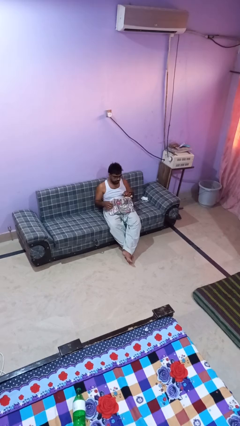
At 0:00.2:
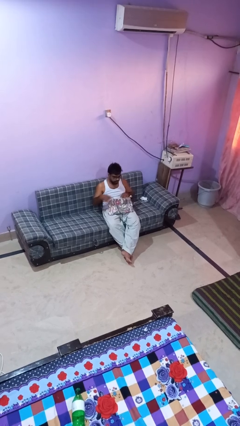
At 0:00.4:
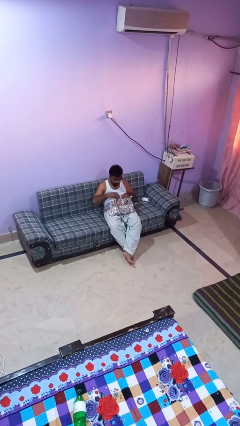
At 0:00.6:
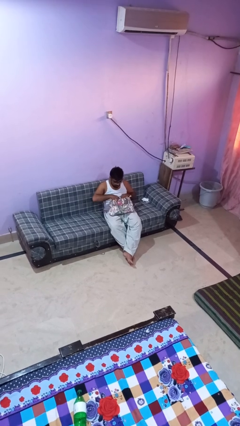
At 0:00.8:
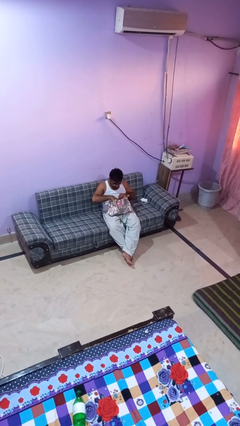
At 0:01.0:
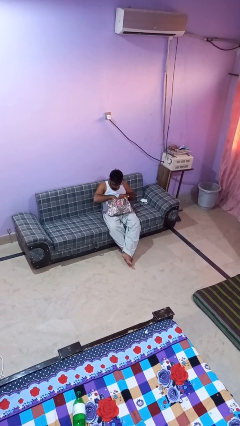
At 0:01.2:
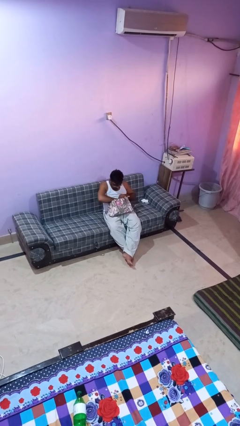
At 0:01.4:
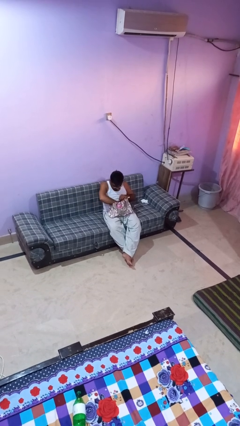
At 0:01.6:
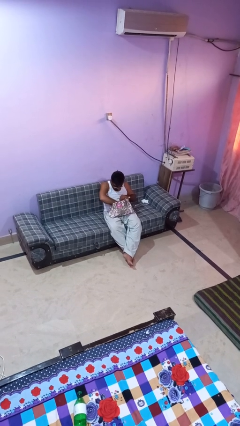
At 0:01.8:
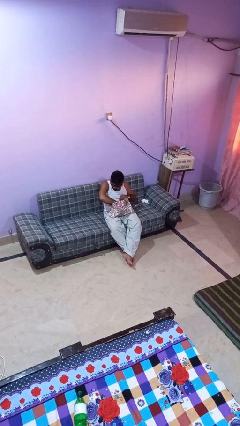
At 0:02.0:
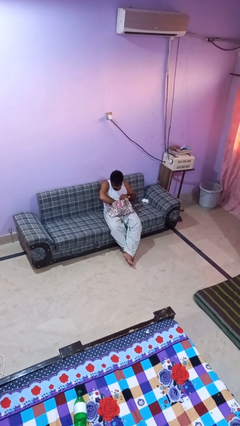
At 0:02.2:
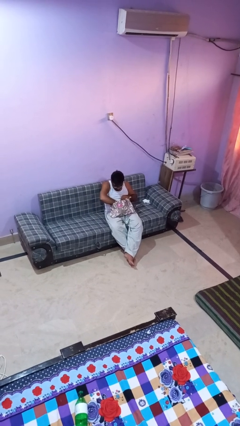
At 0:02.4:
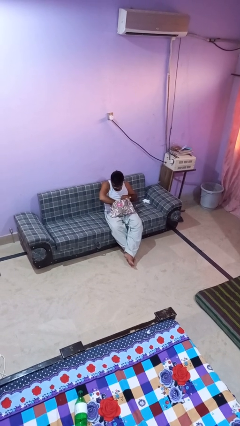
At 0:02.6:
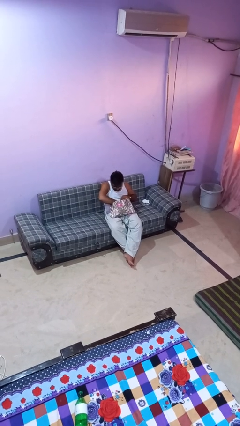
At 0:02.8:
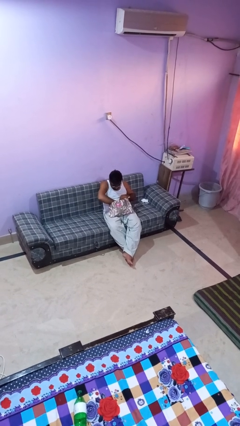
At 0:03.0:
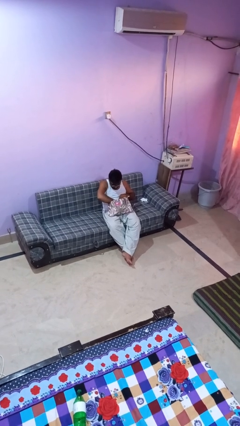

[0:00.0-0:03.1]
person searches in purse

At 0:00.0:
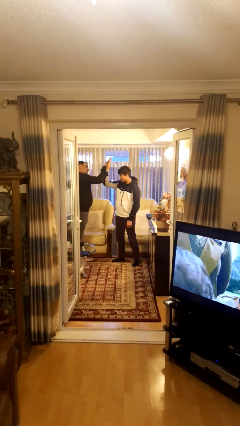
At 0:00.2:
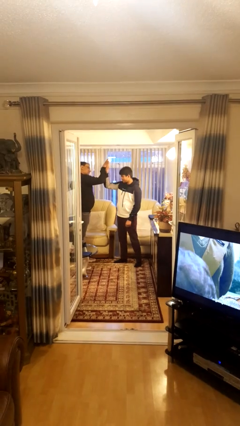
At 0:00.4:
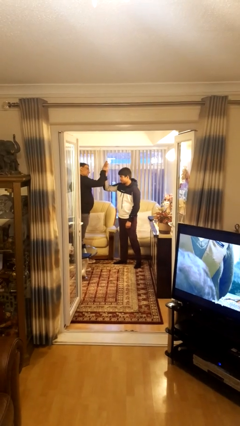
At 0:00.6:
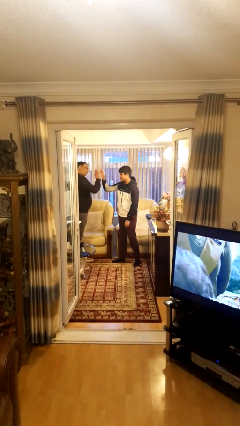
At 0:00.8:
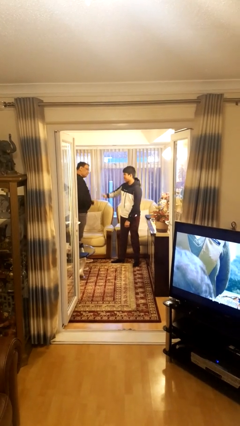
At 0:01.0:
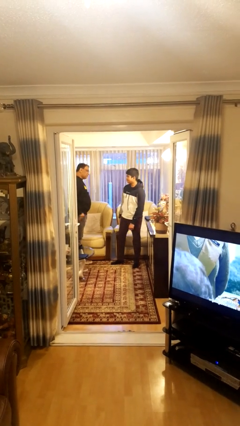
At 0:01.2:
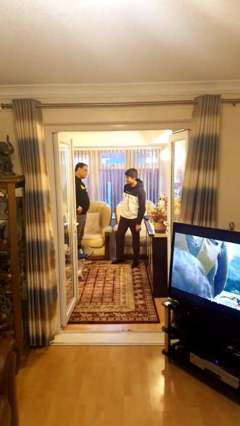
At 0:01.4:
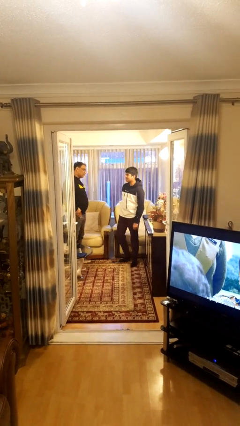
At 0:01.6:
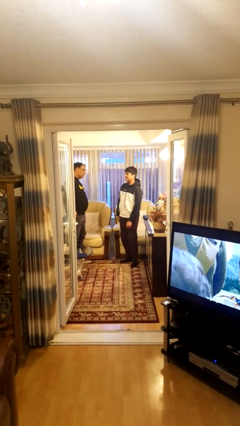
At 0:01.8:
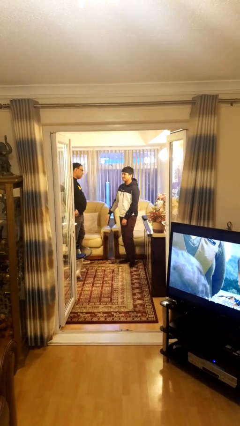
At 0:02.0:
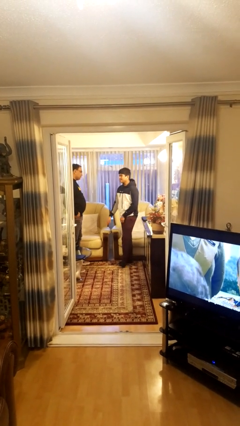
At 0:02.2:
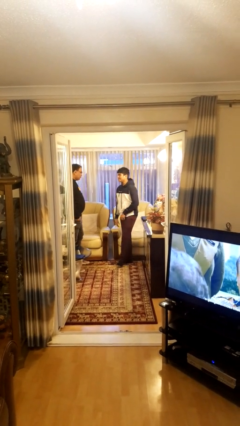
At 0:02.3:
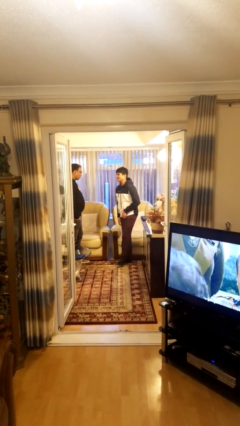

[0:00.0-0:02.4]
person highfives hand

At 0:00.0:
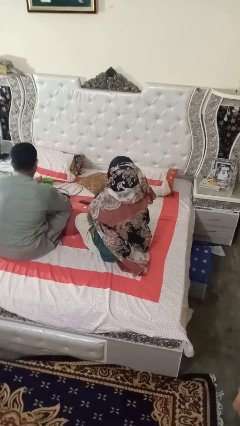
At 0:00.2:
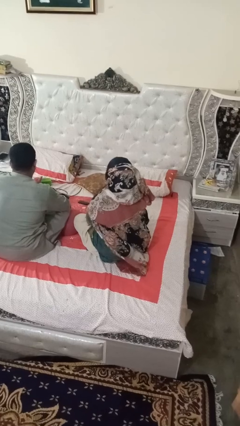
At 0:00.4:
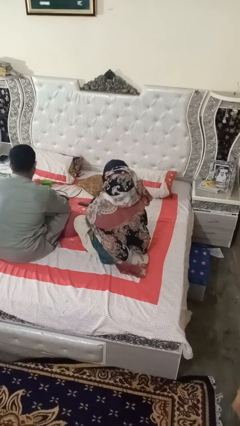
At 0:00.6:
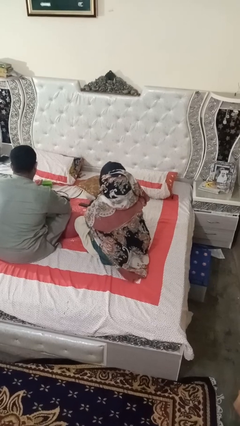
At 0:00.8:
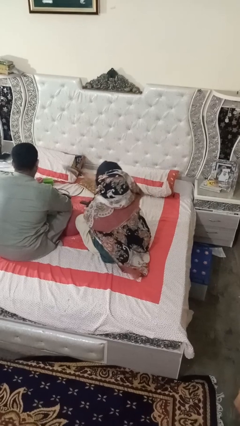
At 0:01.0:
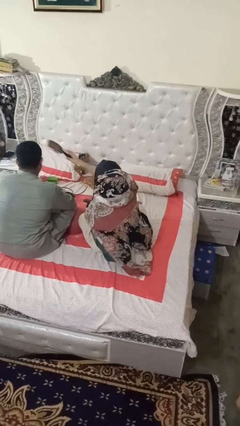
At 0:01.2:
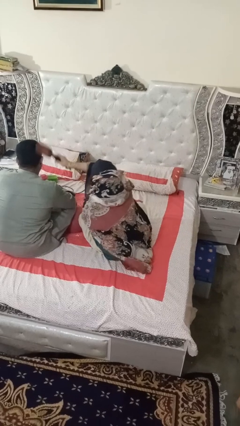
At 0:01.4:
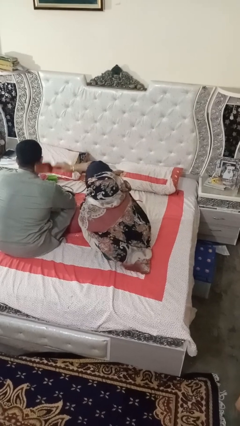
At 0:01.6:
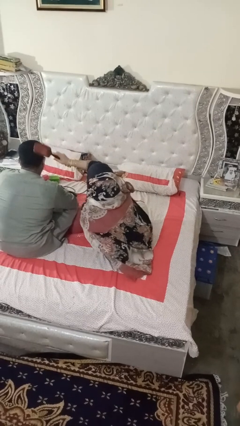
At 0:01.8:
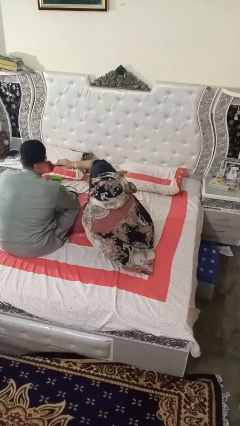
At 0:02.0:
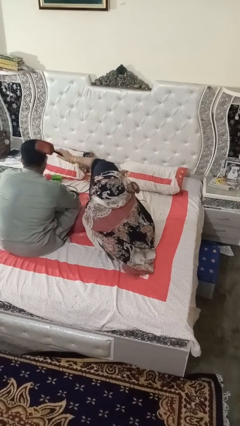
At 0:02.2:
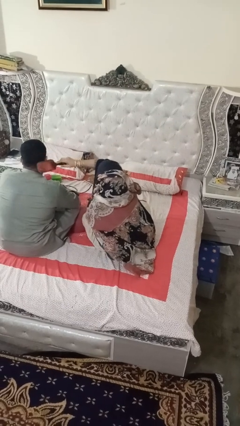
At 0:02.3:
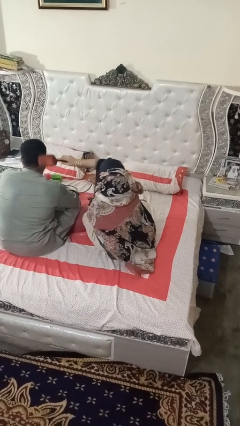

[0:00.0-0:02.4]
person brushes hair of person

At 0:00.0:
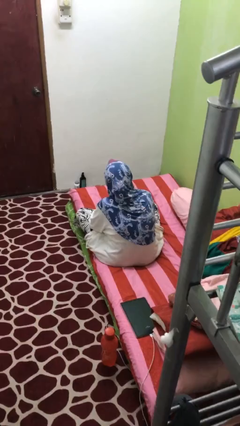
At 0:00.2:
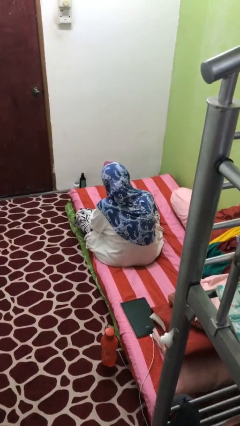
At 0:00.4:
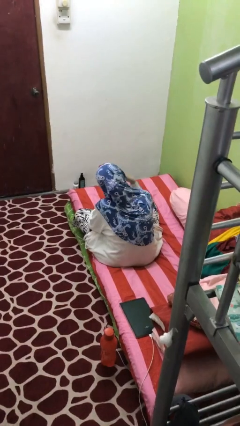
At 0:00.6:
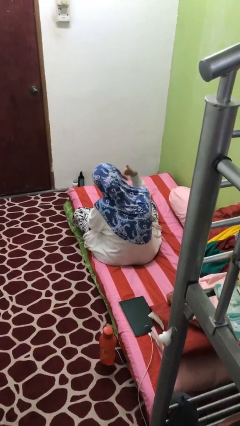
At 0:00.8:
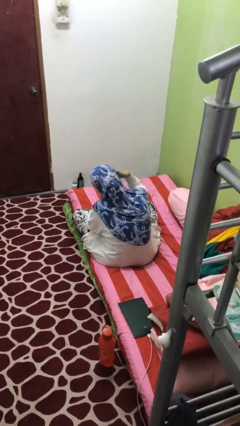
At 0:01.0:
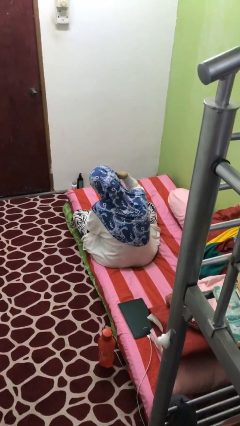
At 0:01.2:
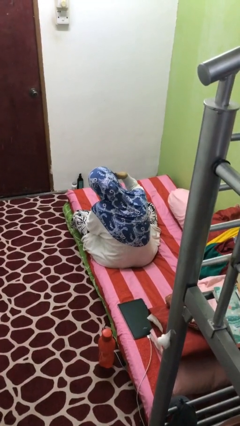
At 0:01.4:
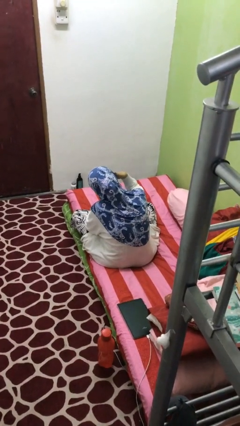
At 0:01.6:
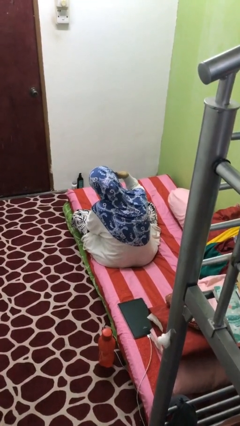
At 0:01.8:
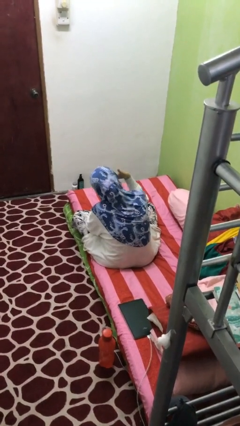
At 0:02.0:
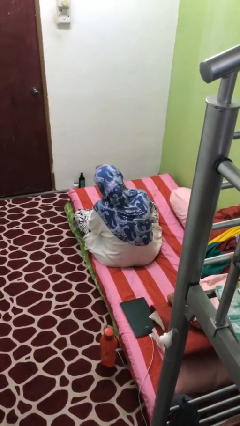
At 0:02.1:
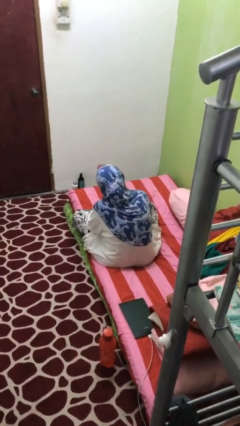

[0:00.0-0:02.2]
person gestures call me

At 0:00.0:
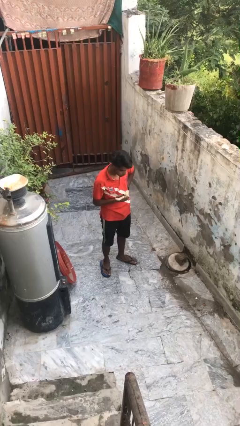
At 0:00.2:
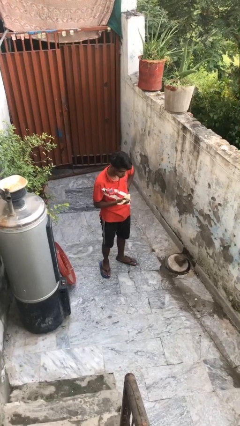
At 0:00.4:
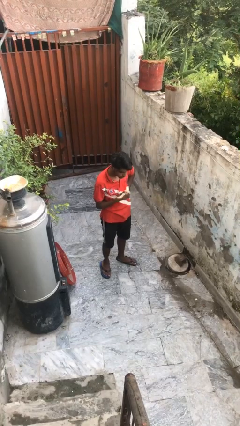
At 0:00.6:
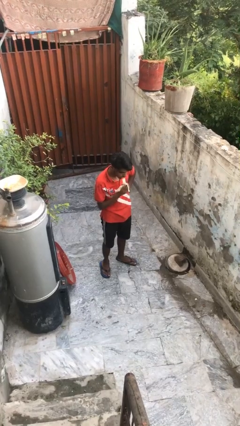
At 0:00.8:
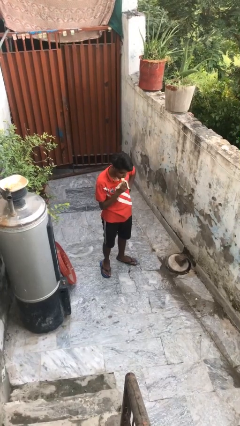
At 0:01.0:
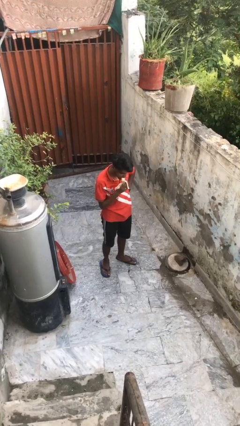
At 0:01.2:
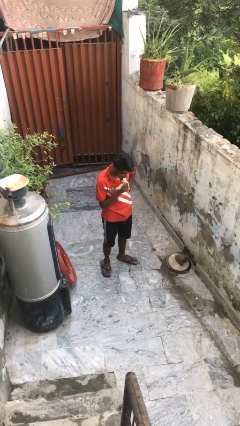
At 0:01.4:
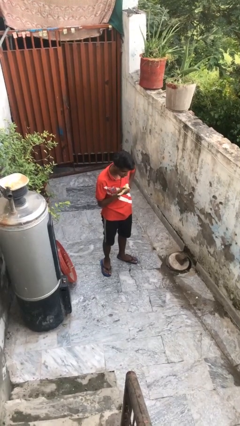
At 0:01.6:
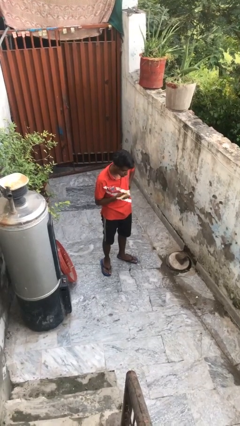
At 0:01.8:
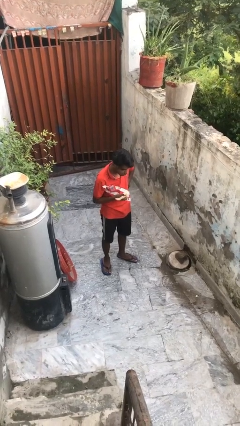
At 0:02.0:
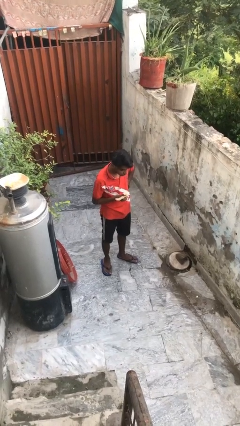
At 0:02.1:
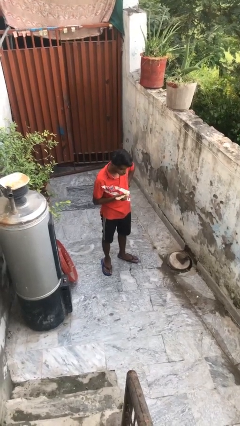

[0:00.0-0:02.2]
person eats banana

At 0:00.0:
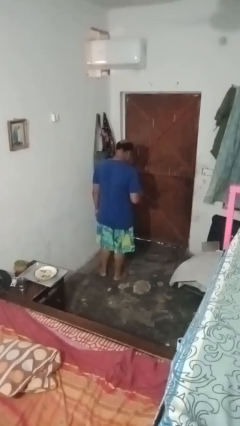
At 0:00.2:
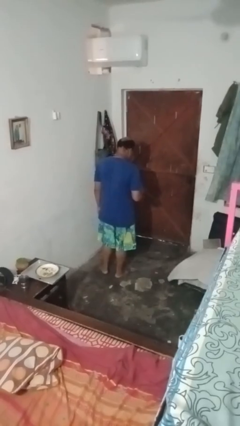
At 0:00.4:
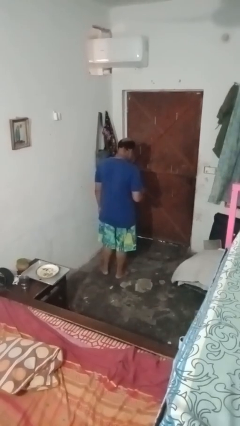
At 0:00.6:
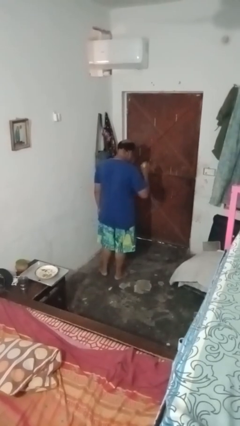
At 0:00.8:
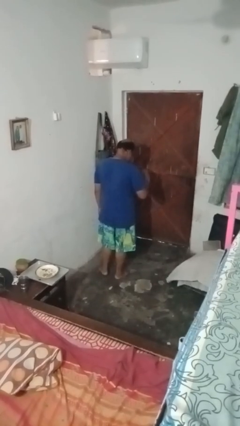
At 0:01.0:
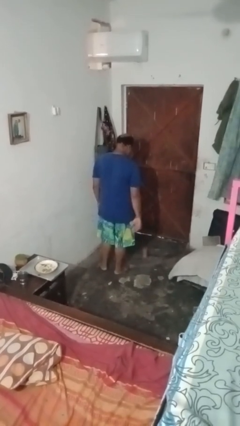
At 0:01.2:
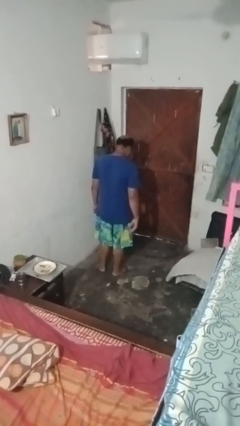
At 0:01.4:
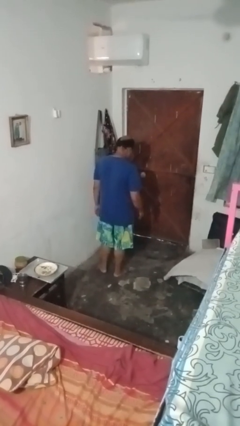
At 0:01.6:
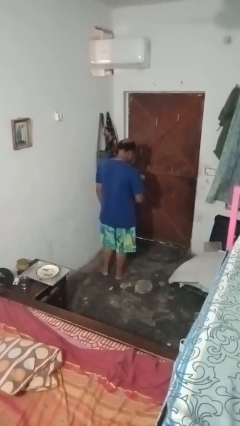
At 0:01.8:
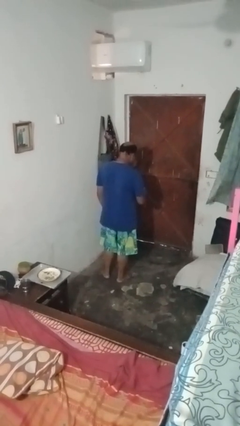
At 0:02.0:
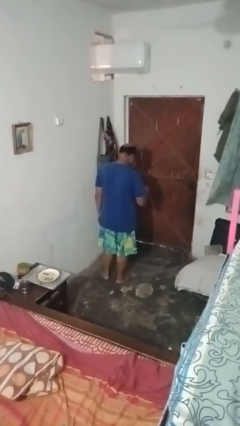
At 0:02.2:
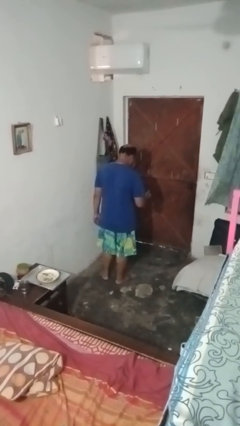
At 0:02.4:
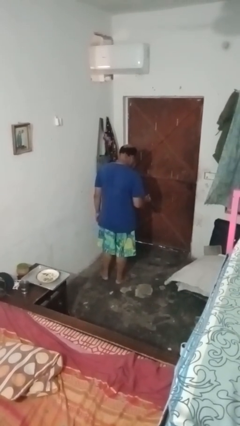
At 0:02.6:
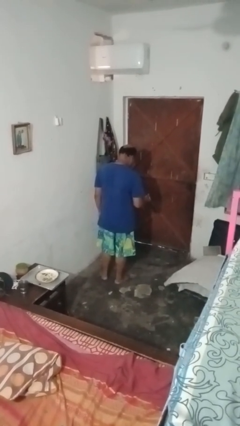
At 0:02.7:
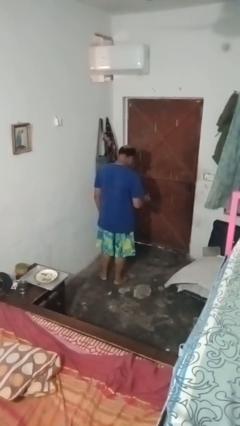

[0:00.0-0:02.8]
person bounces ball on floor

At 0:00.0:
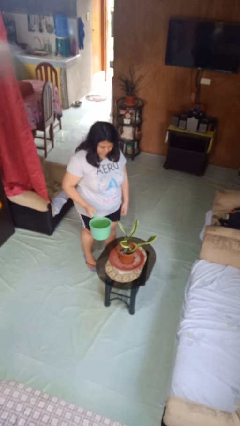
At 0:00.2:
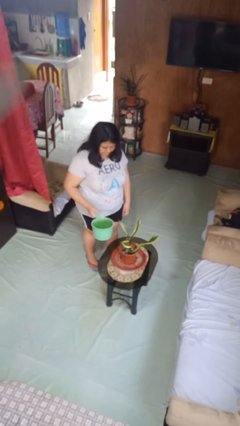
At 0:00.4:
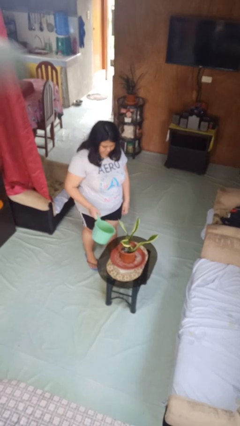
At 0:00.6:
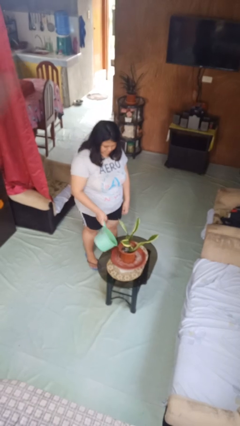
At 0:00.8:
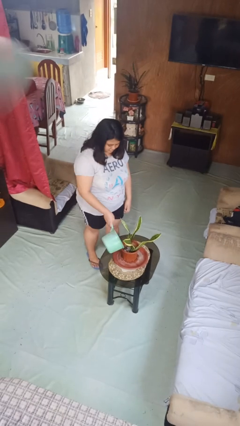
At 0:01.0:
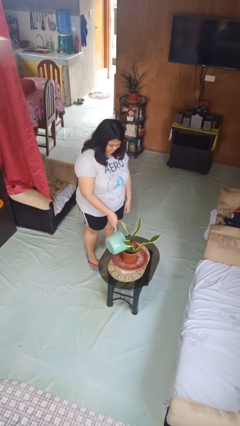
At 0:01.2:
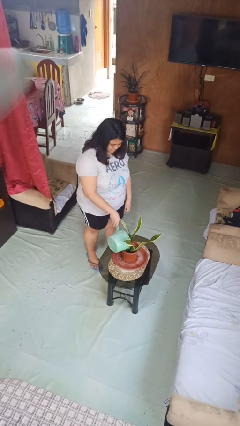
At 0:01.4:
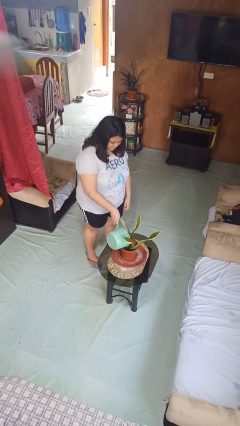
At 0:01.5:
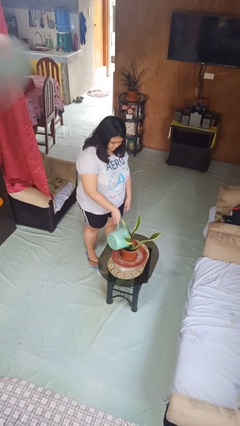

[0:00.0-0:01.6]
person waters houseplant

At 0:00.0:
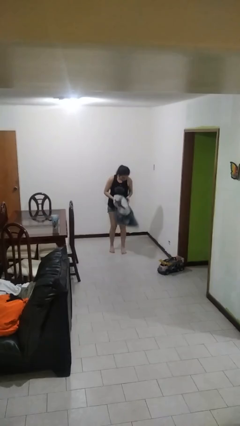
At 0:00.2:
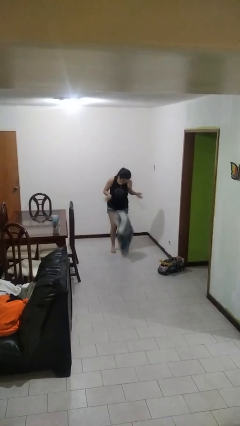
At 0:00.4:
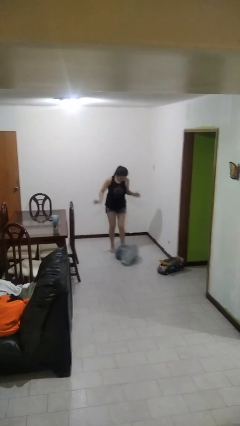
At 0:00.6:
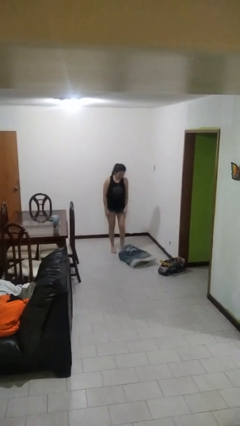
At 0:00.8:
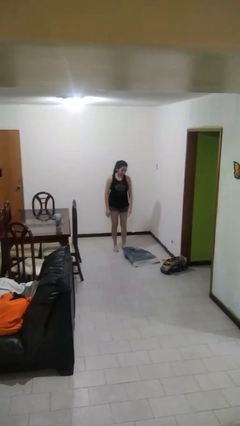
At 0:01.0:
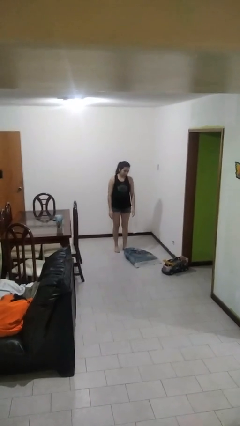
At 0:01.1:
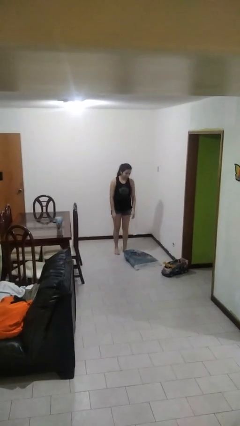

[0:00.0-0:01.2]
person drops object
